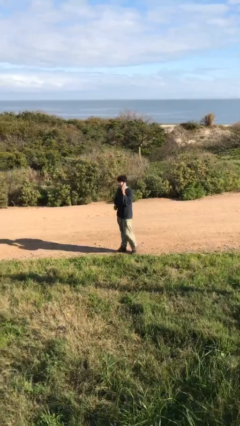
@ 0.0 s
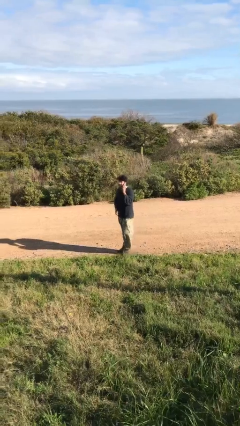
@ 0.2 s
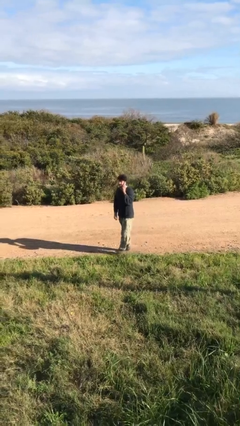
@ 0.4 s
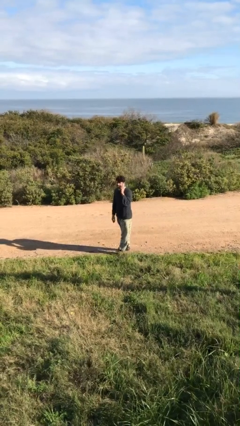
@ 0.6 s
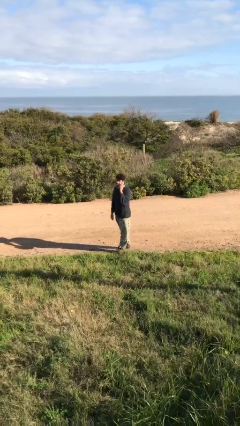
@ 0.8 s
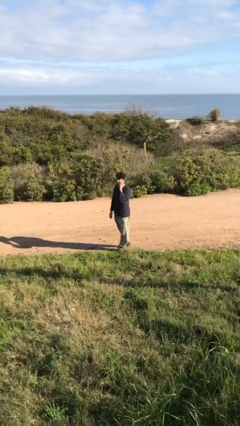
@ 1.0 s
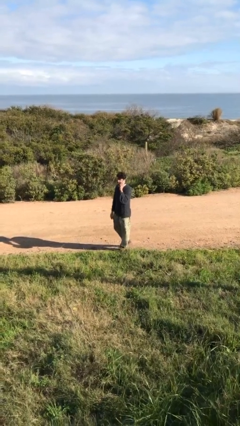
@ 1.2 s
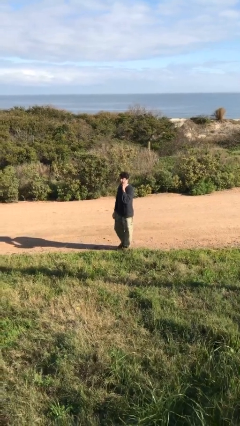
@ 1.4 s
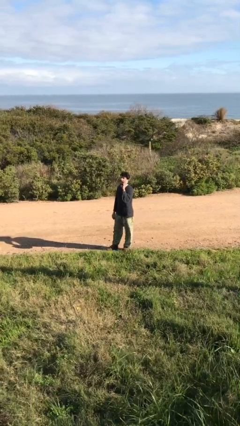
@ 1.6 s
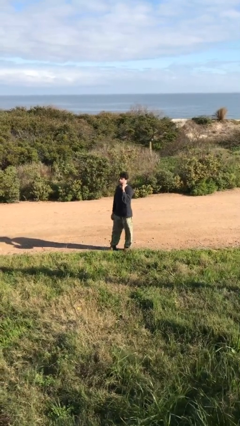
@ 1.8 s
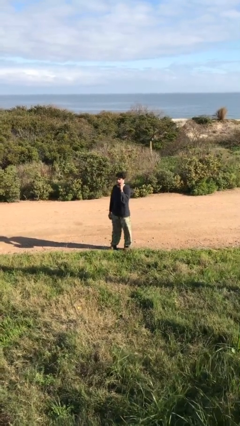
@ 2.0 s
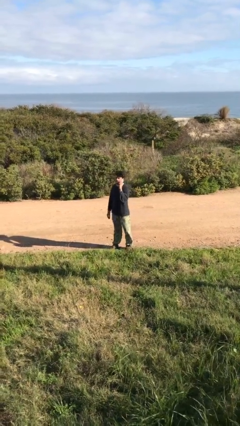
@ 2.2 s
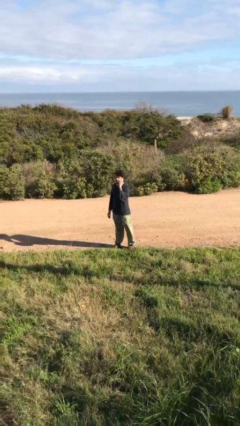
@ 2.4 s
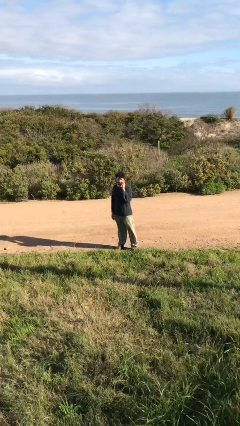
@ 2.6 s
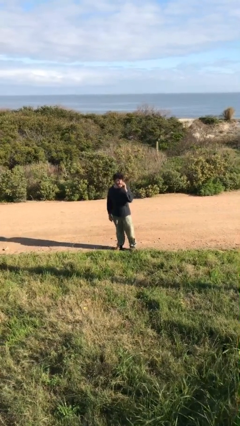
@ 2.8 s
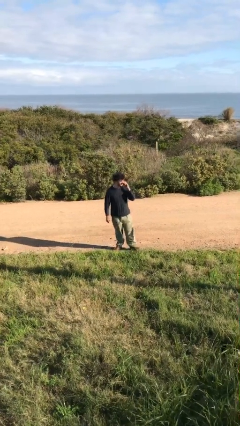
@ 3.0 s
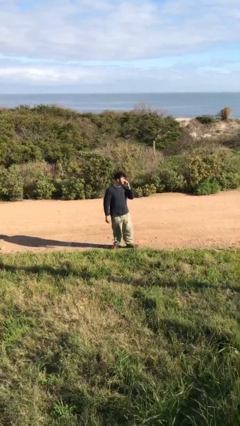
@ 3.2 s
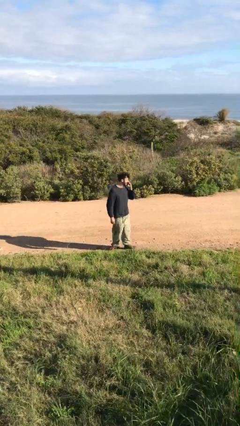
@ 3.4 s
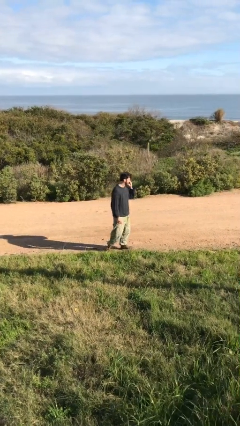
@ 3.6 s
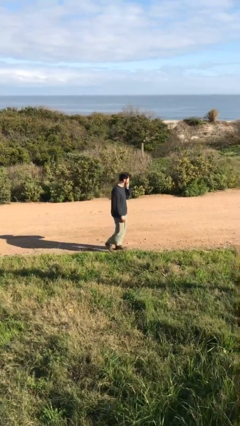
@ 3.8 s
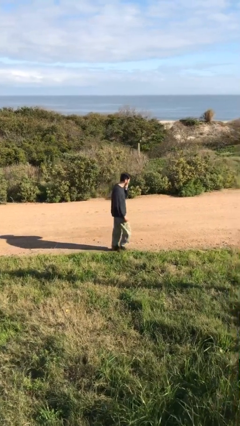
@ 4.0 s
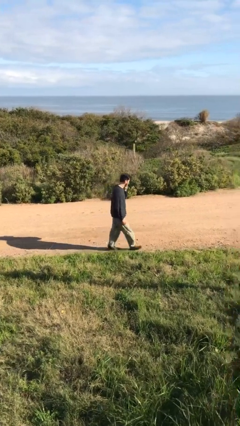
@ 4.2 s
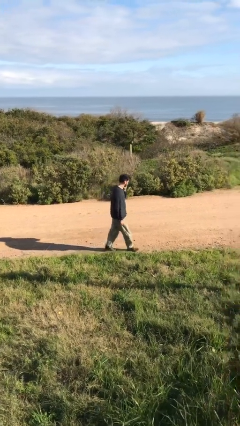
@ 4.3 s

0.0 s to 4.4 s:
person talks on phone

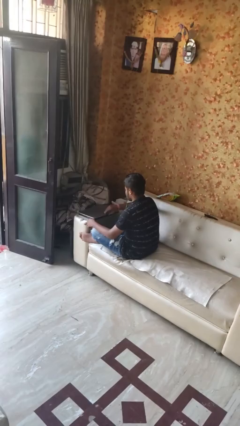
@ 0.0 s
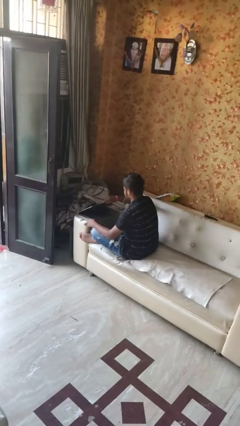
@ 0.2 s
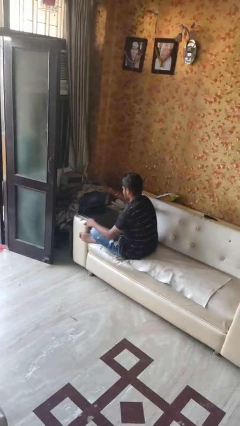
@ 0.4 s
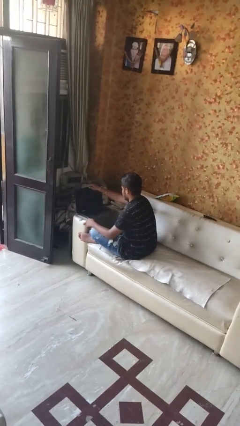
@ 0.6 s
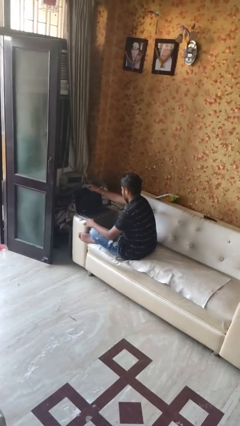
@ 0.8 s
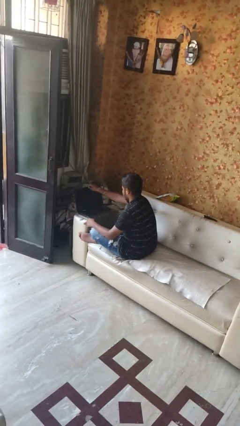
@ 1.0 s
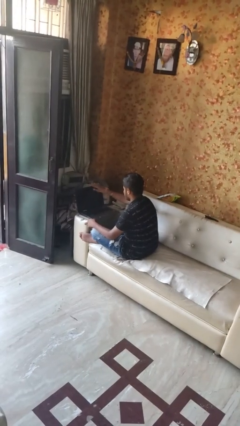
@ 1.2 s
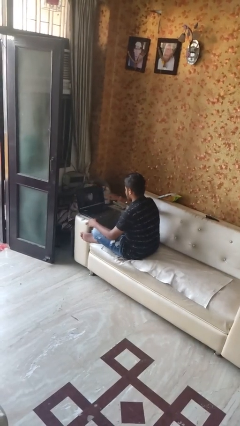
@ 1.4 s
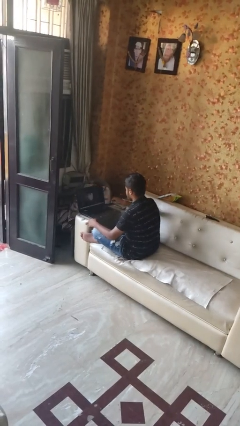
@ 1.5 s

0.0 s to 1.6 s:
person opens laptop

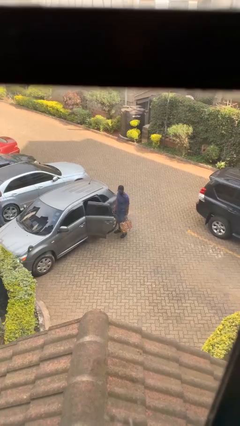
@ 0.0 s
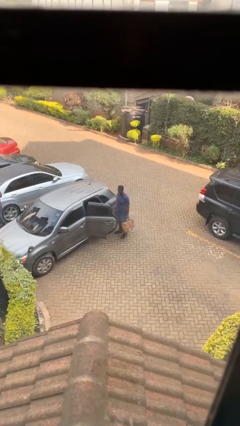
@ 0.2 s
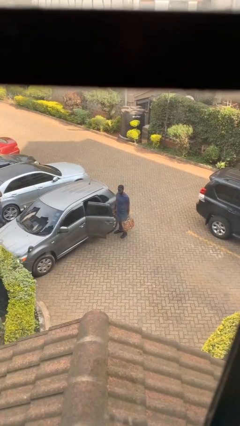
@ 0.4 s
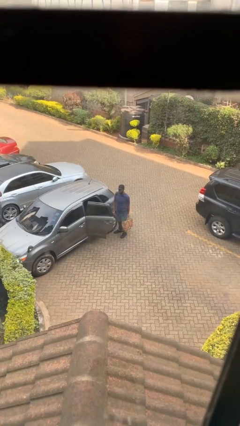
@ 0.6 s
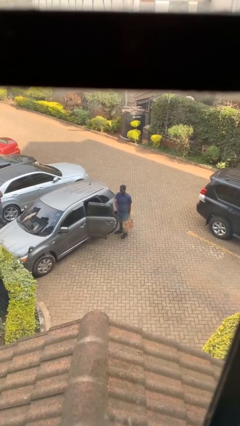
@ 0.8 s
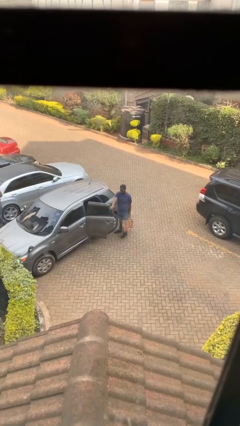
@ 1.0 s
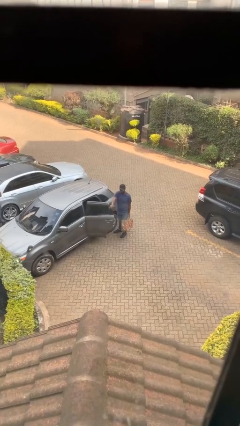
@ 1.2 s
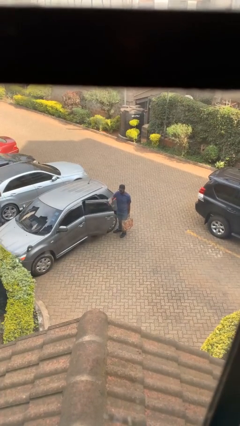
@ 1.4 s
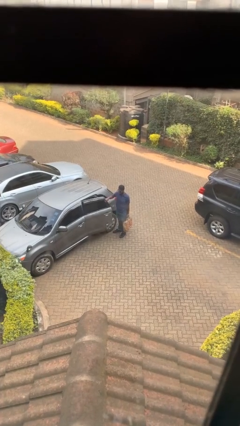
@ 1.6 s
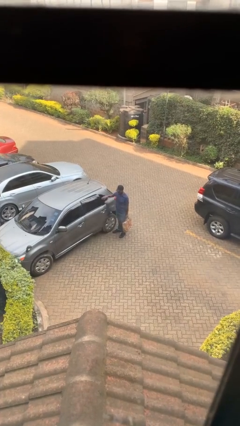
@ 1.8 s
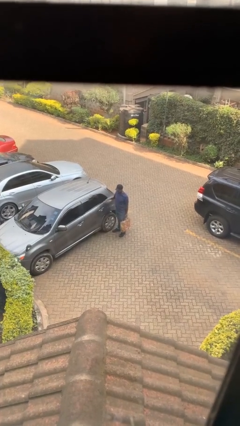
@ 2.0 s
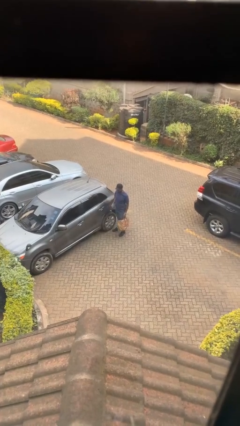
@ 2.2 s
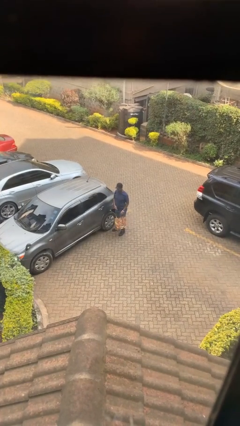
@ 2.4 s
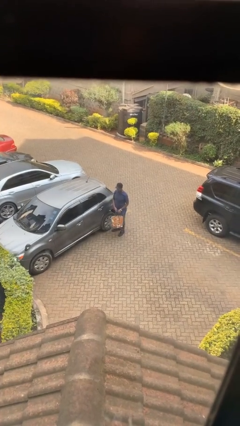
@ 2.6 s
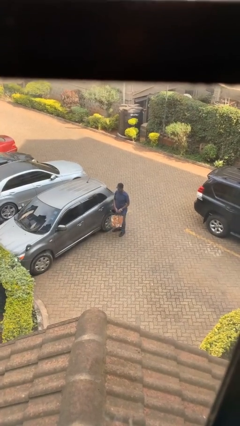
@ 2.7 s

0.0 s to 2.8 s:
person closes car door

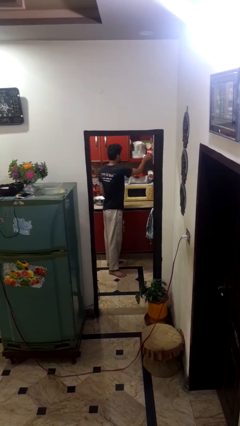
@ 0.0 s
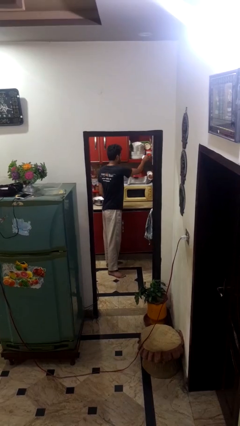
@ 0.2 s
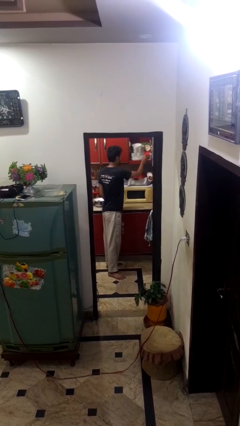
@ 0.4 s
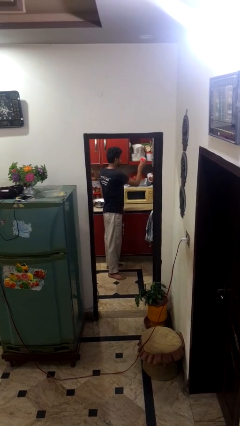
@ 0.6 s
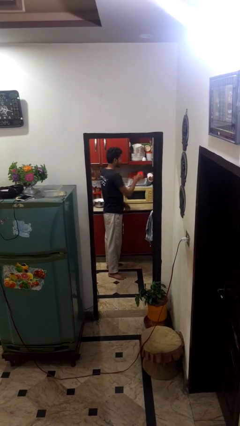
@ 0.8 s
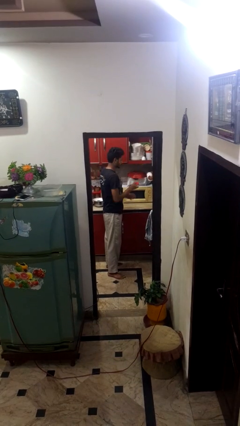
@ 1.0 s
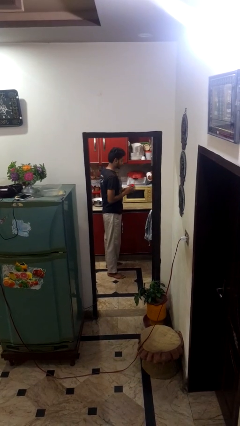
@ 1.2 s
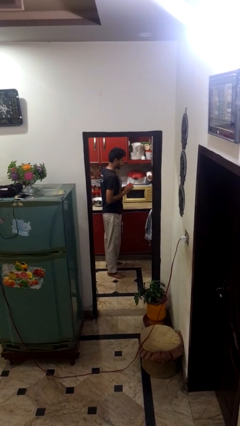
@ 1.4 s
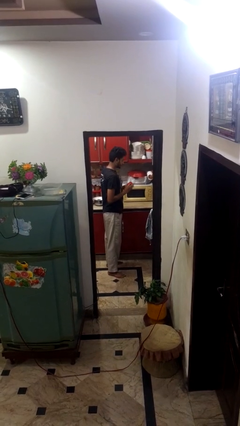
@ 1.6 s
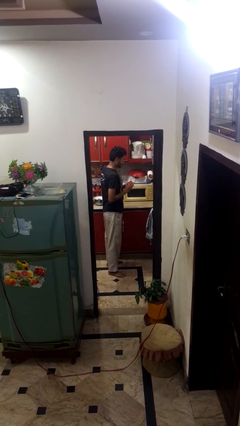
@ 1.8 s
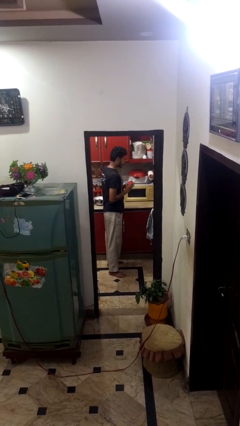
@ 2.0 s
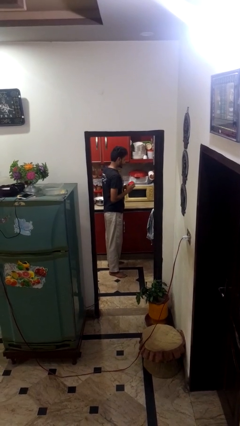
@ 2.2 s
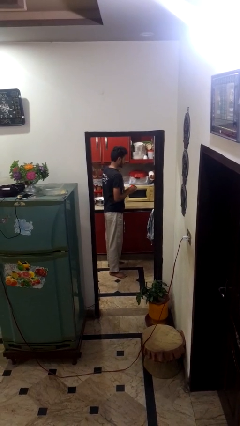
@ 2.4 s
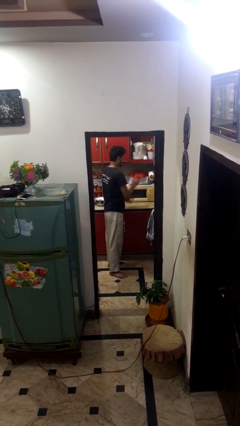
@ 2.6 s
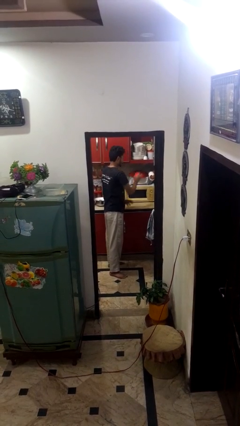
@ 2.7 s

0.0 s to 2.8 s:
person picks up object from cabinet

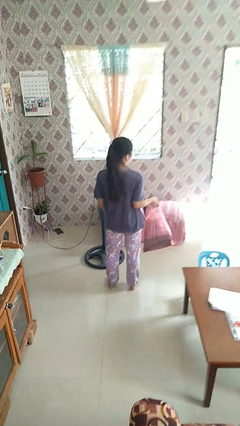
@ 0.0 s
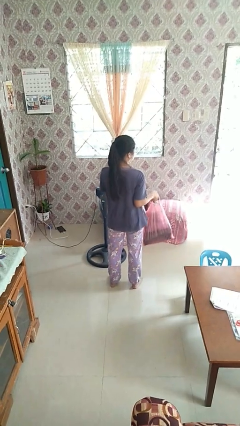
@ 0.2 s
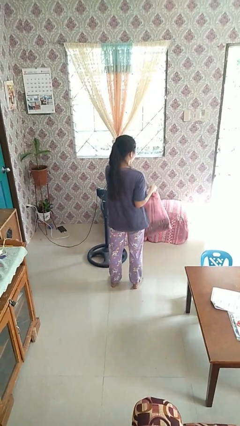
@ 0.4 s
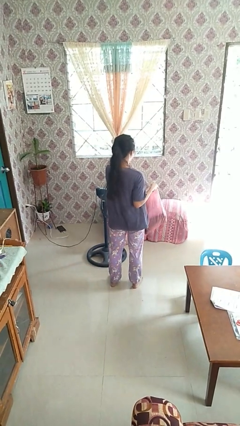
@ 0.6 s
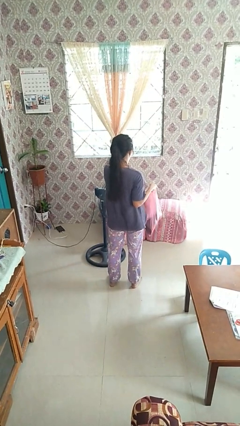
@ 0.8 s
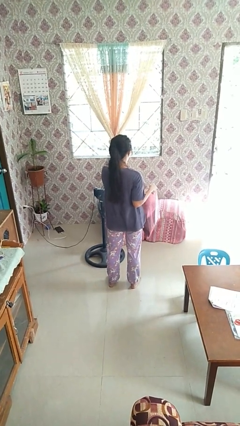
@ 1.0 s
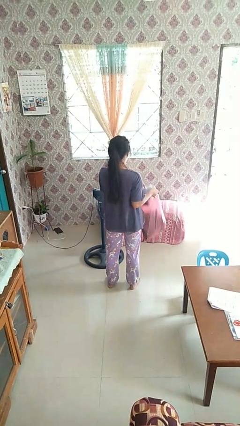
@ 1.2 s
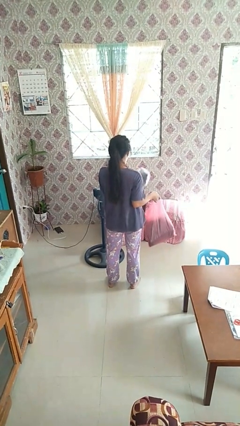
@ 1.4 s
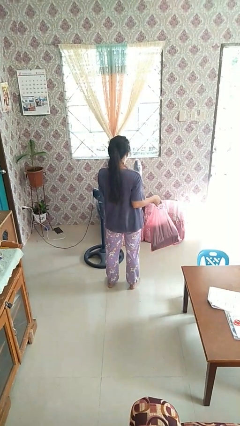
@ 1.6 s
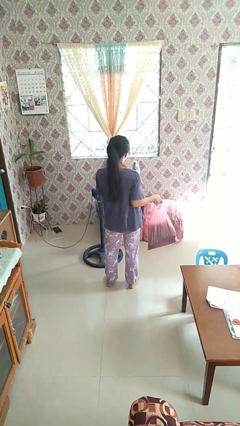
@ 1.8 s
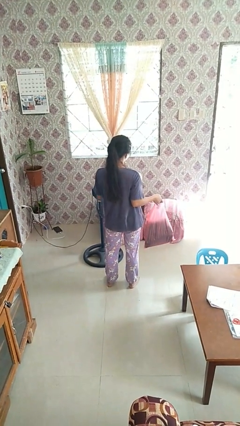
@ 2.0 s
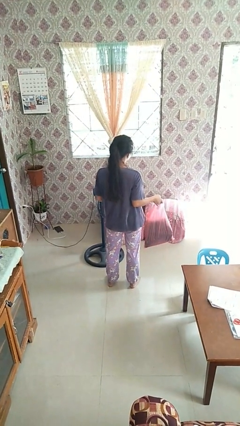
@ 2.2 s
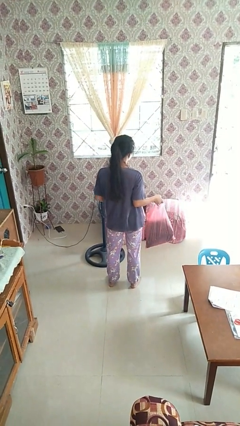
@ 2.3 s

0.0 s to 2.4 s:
person takes object from bag

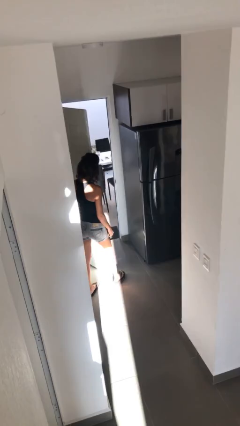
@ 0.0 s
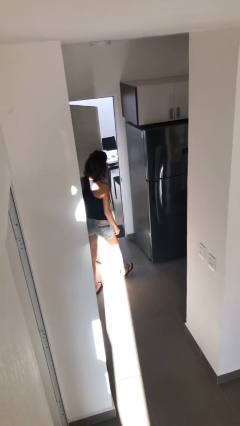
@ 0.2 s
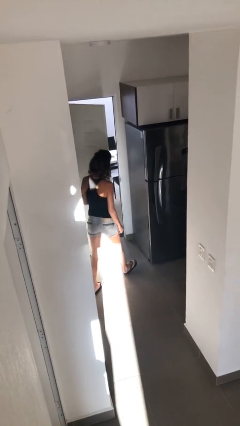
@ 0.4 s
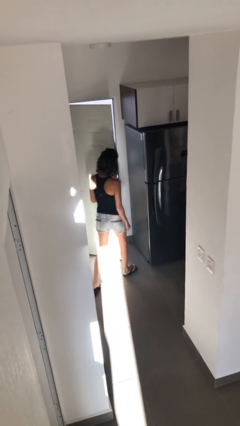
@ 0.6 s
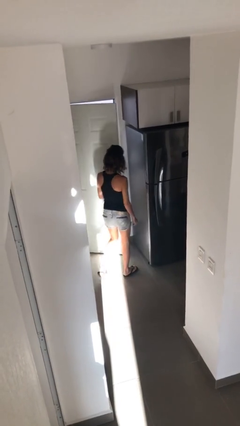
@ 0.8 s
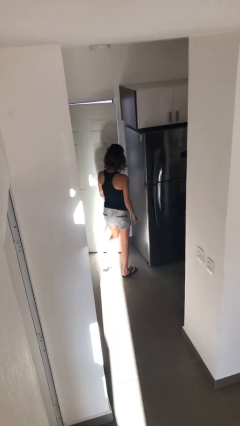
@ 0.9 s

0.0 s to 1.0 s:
person closes facility door

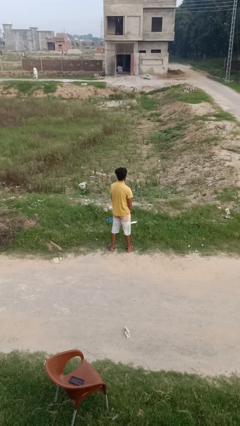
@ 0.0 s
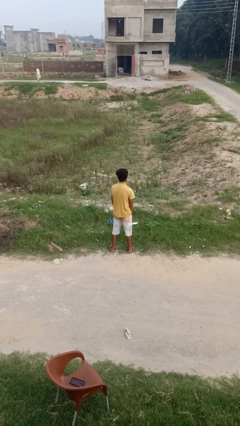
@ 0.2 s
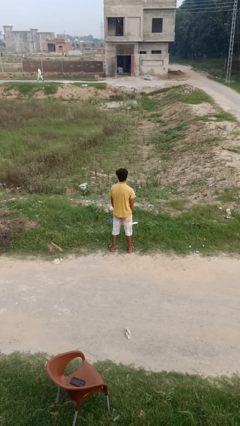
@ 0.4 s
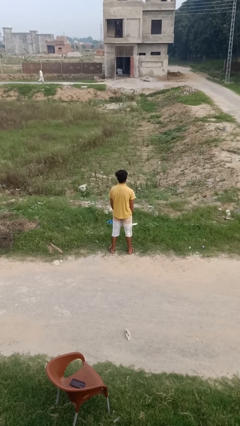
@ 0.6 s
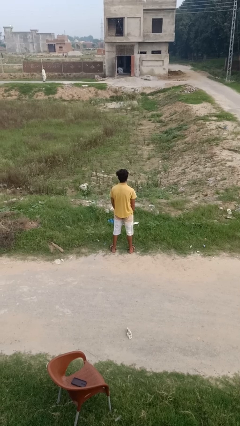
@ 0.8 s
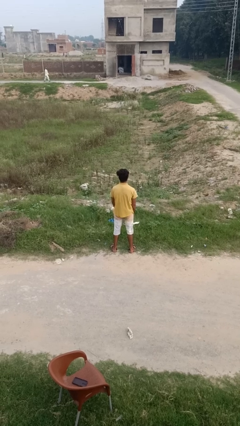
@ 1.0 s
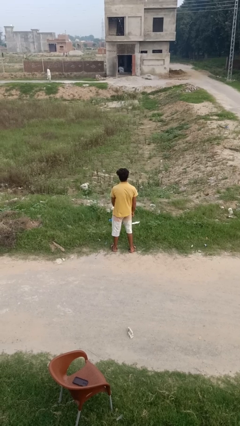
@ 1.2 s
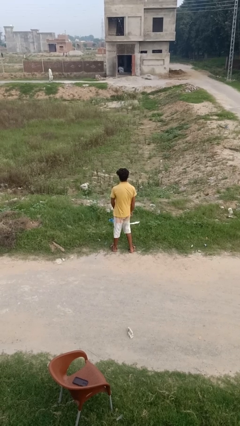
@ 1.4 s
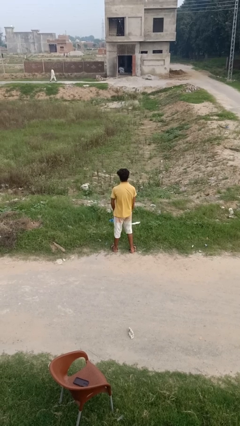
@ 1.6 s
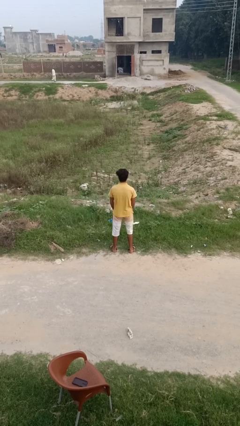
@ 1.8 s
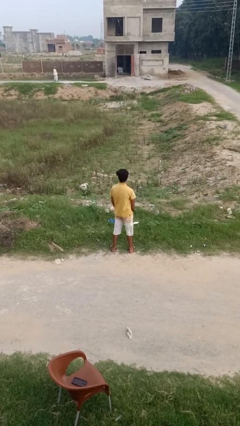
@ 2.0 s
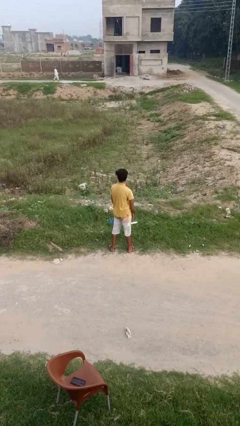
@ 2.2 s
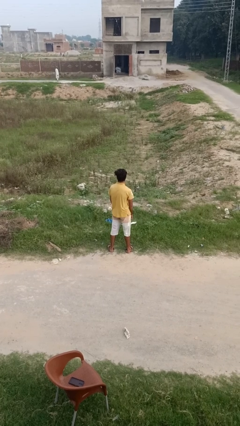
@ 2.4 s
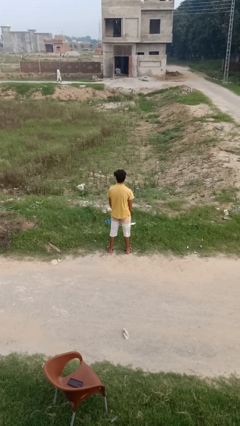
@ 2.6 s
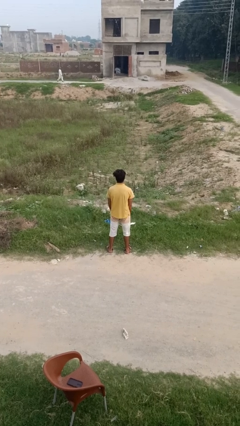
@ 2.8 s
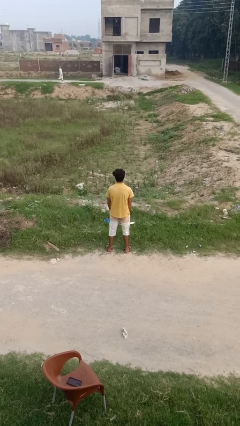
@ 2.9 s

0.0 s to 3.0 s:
person twirls
